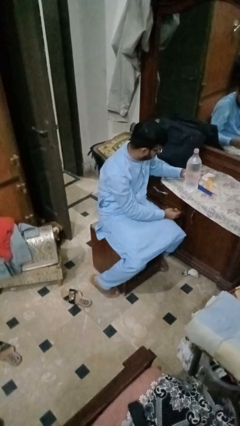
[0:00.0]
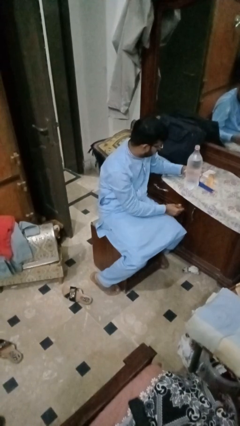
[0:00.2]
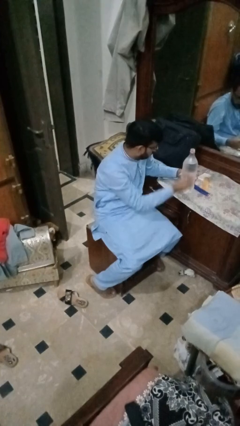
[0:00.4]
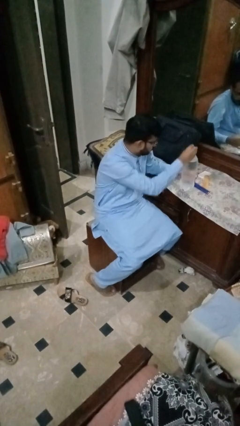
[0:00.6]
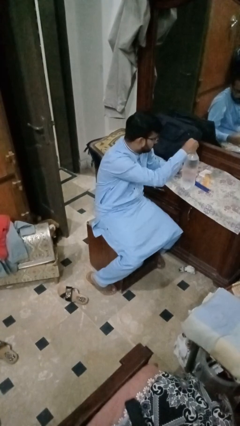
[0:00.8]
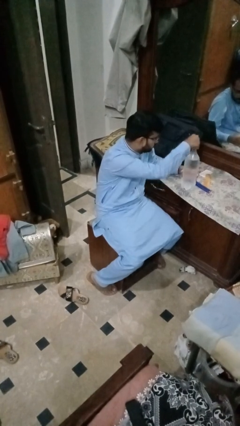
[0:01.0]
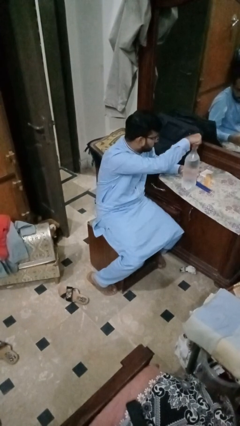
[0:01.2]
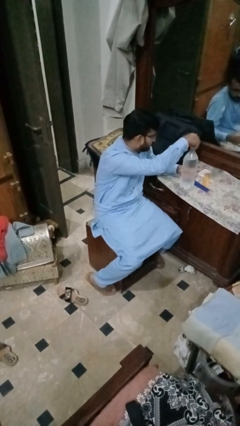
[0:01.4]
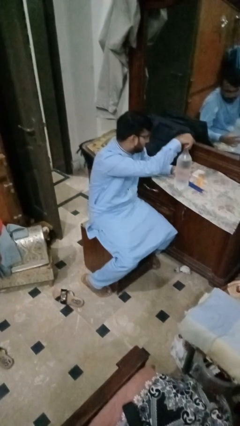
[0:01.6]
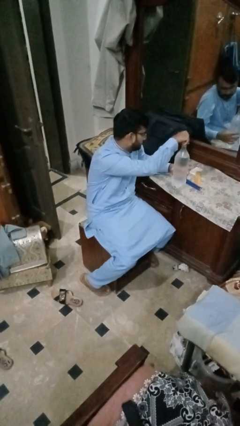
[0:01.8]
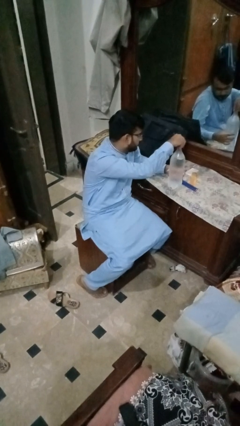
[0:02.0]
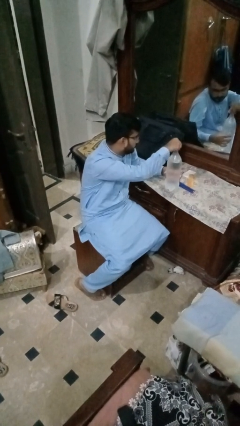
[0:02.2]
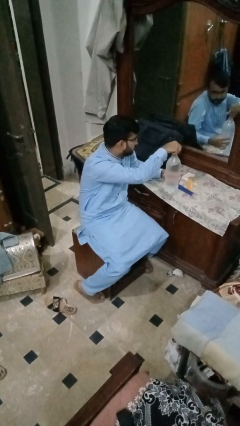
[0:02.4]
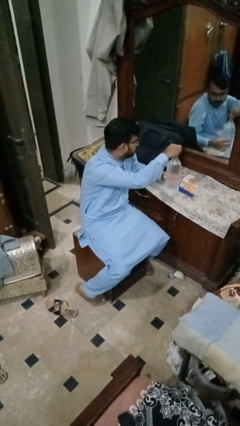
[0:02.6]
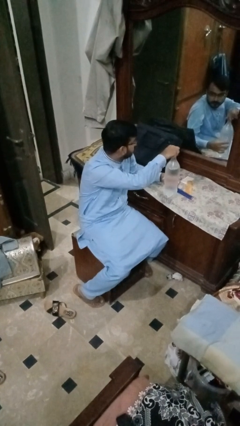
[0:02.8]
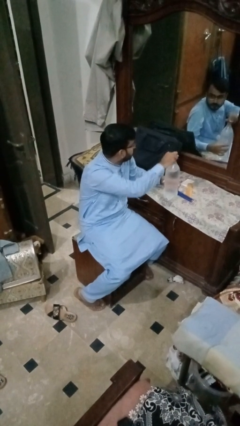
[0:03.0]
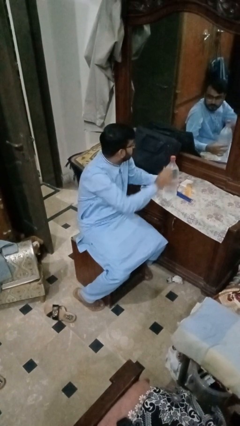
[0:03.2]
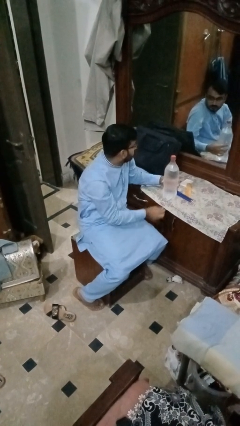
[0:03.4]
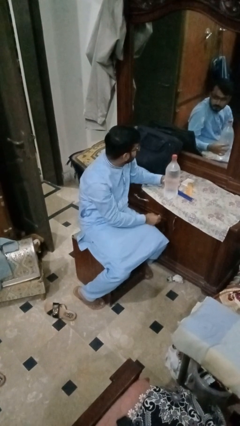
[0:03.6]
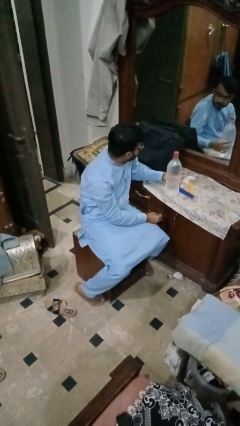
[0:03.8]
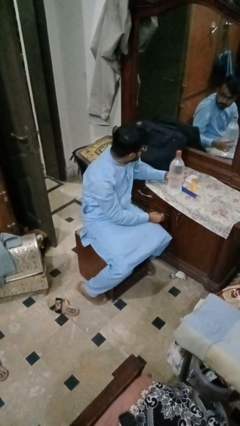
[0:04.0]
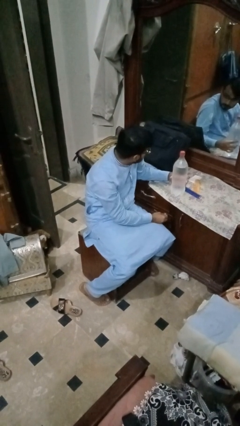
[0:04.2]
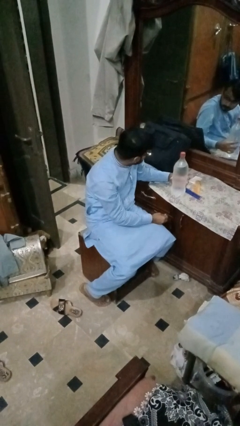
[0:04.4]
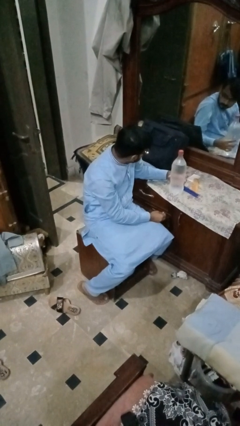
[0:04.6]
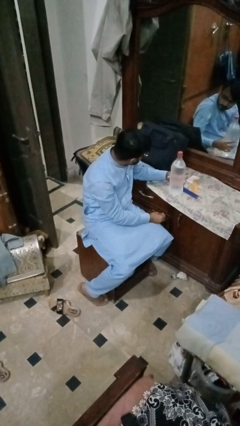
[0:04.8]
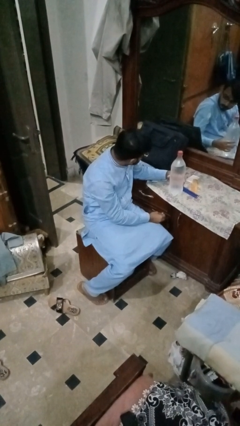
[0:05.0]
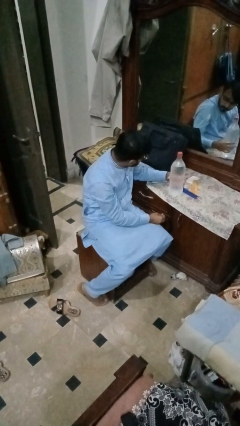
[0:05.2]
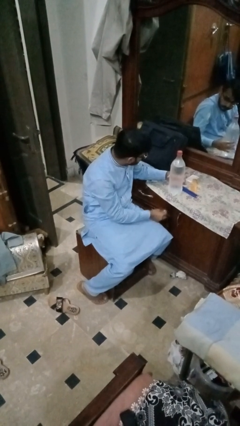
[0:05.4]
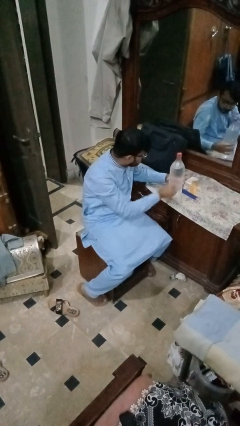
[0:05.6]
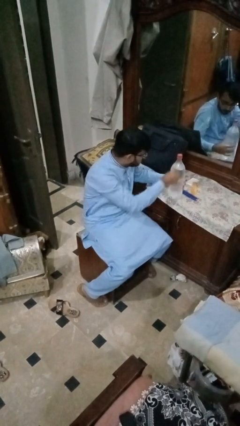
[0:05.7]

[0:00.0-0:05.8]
person screws lid to bottle

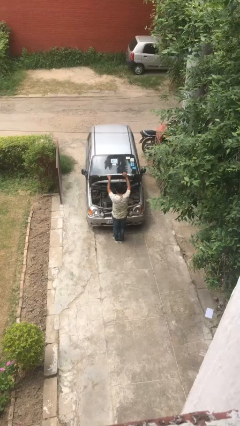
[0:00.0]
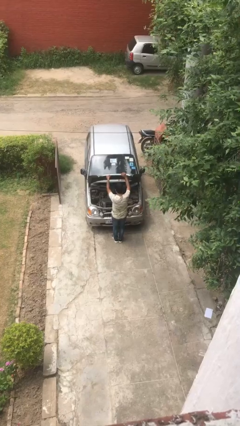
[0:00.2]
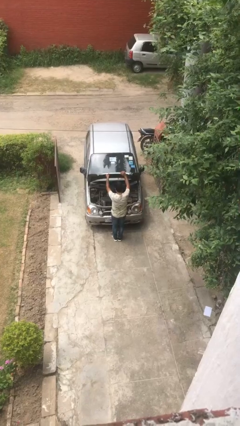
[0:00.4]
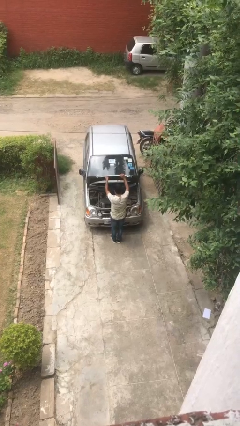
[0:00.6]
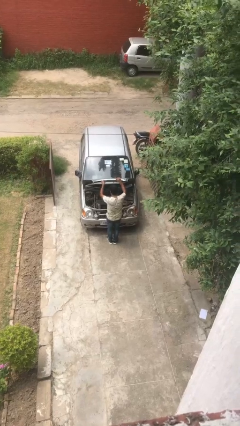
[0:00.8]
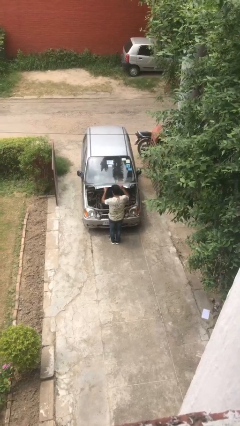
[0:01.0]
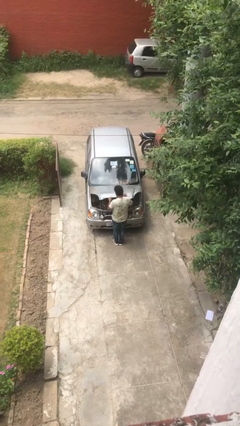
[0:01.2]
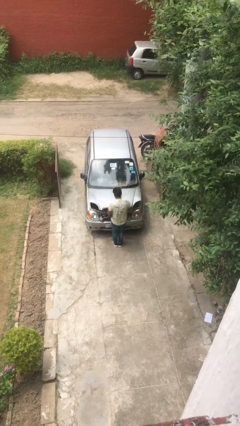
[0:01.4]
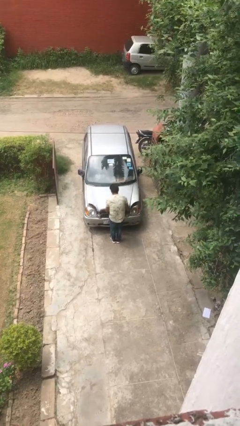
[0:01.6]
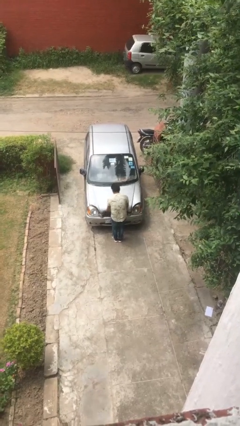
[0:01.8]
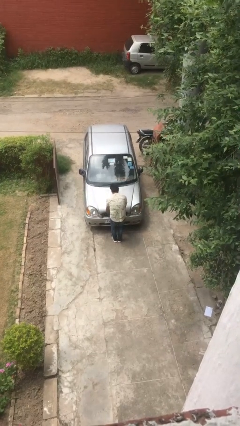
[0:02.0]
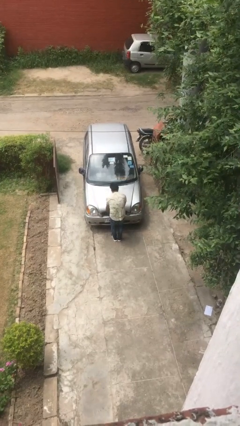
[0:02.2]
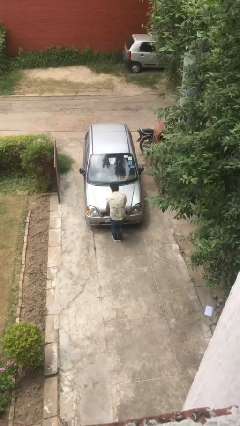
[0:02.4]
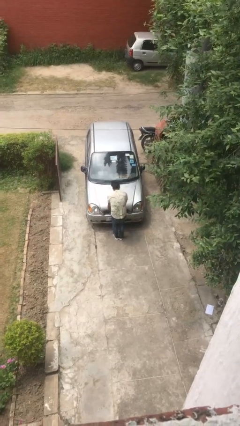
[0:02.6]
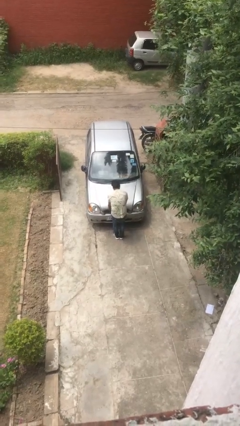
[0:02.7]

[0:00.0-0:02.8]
person closes car hood

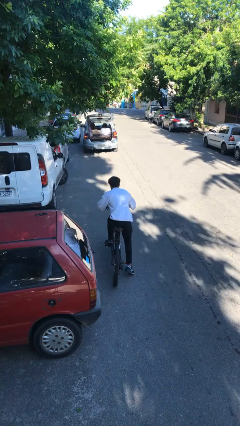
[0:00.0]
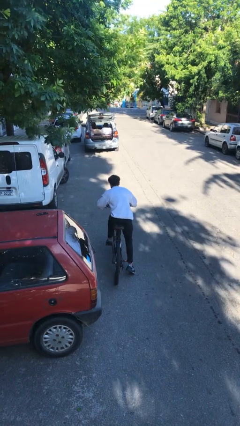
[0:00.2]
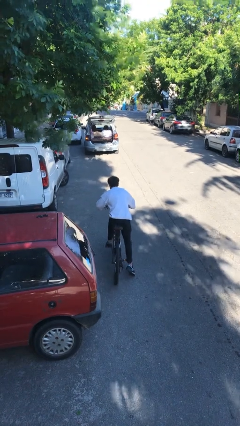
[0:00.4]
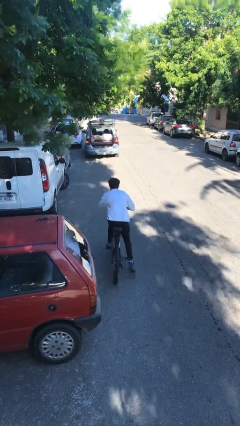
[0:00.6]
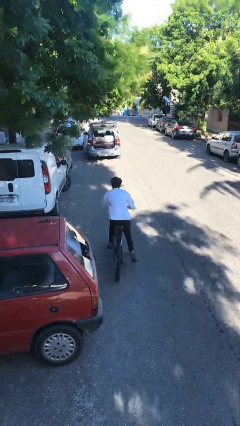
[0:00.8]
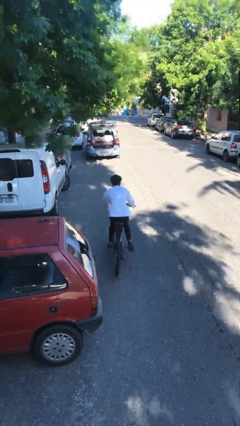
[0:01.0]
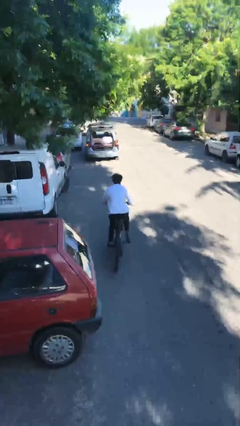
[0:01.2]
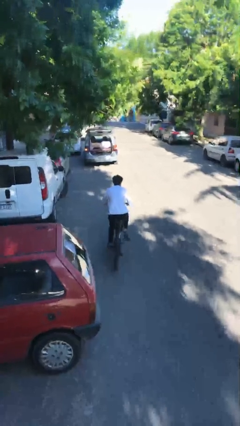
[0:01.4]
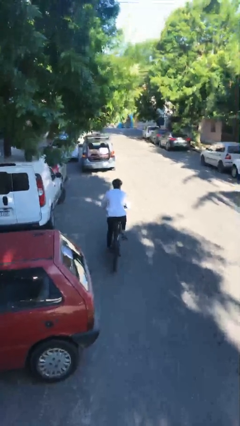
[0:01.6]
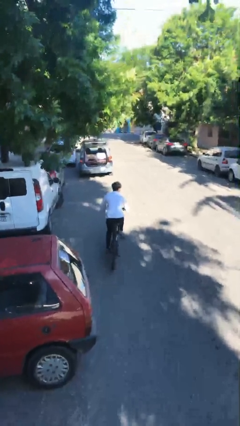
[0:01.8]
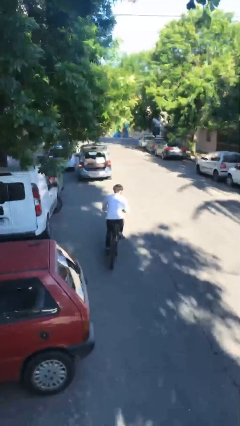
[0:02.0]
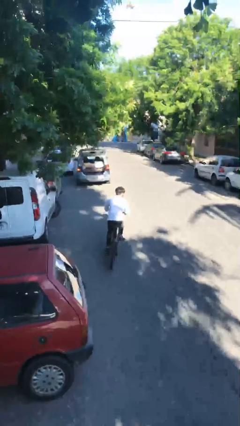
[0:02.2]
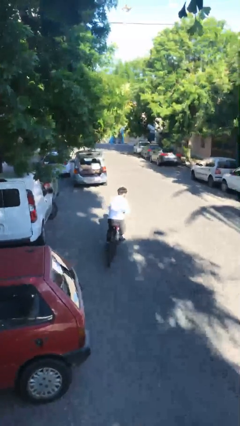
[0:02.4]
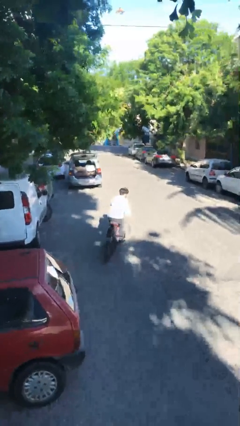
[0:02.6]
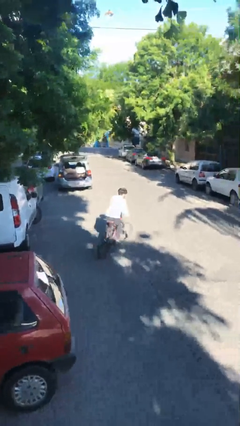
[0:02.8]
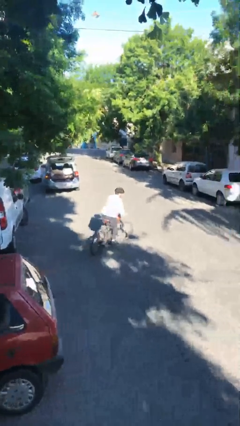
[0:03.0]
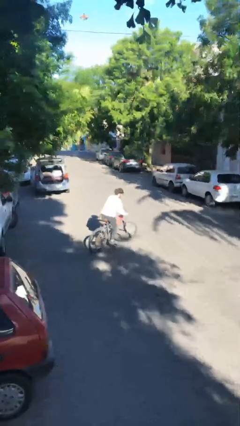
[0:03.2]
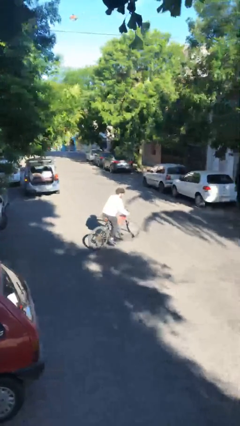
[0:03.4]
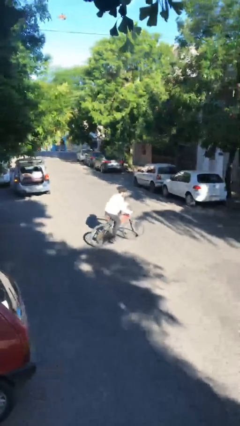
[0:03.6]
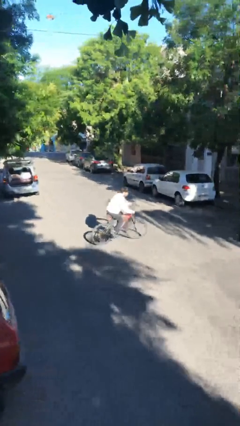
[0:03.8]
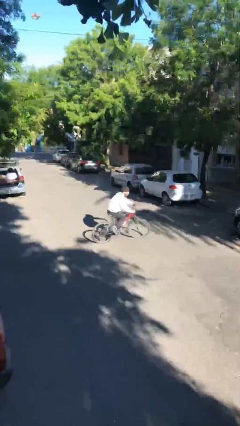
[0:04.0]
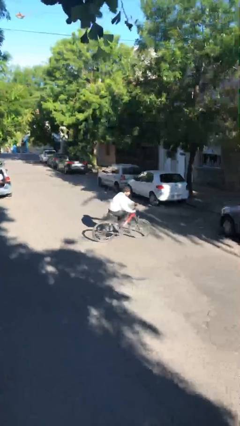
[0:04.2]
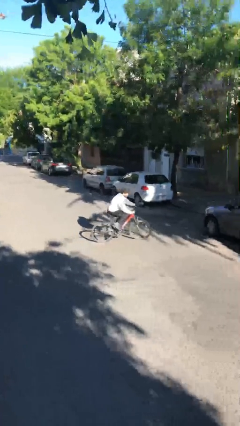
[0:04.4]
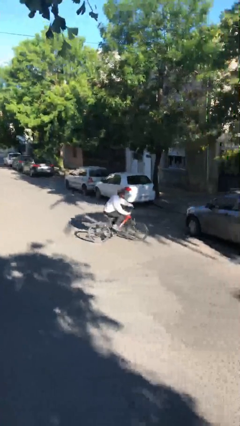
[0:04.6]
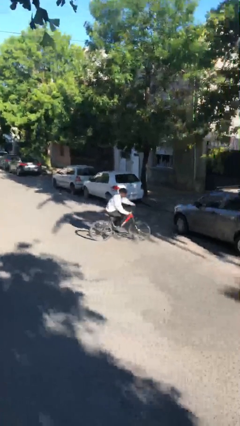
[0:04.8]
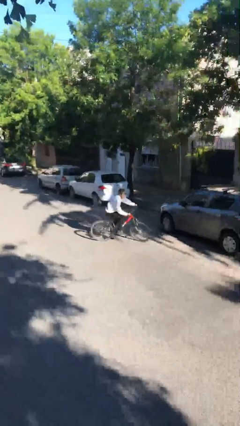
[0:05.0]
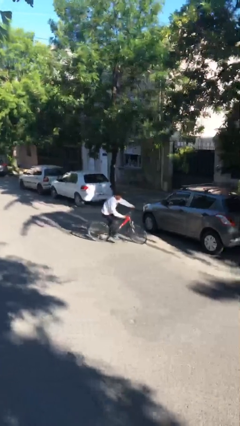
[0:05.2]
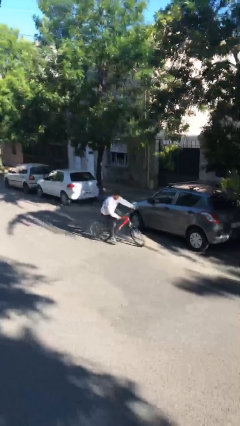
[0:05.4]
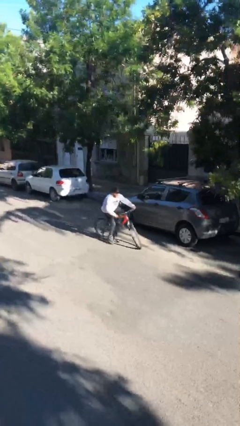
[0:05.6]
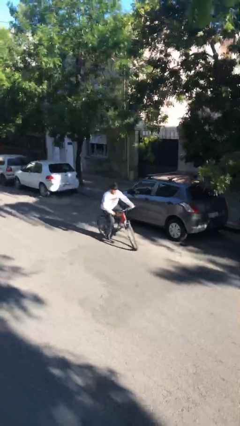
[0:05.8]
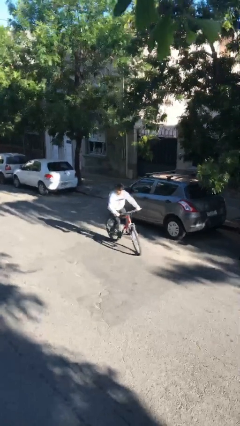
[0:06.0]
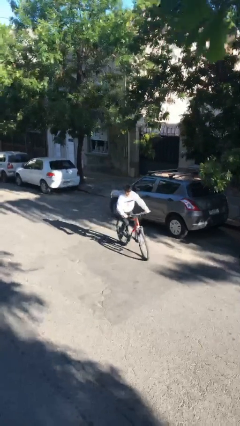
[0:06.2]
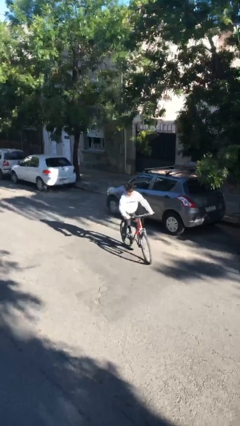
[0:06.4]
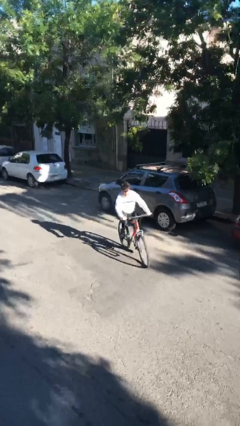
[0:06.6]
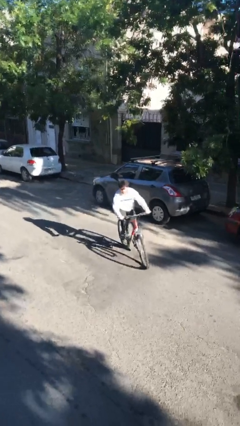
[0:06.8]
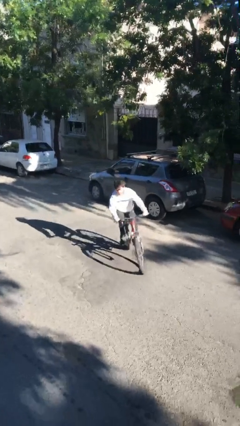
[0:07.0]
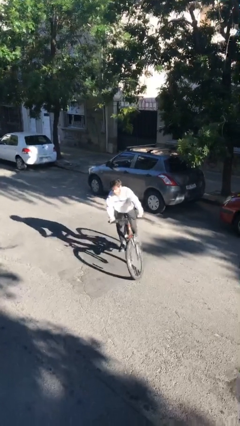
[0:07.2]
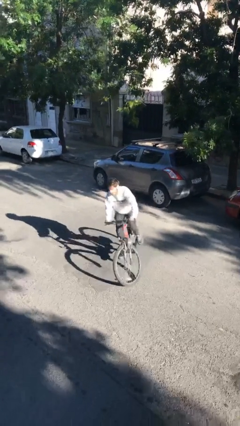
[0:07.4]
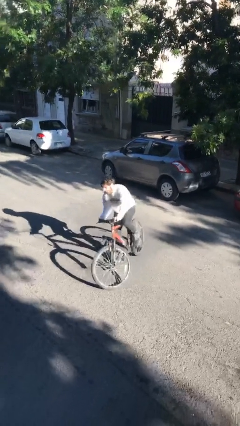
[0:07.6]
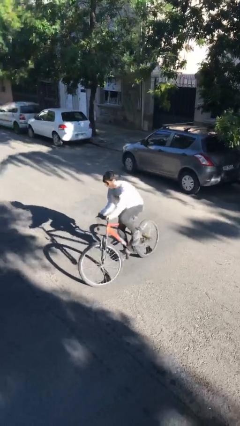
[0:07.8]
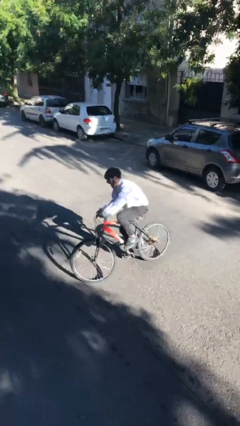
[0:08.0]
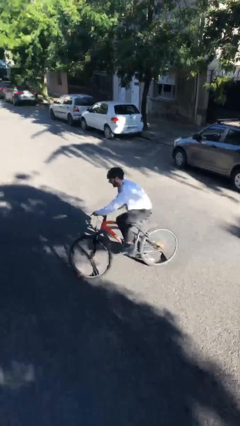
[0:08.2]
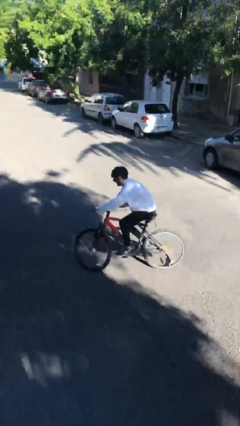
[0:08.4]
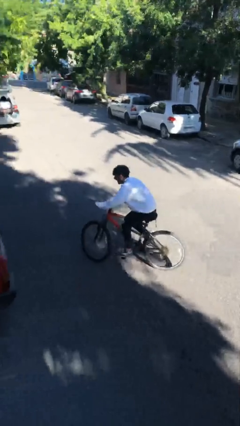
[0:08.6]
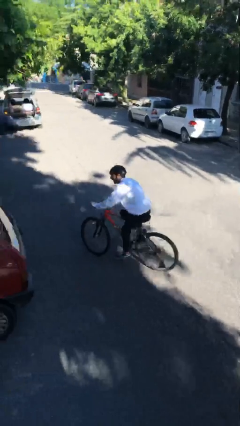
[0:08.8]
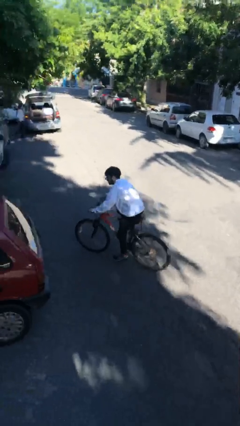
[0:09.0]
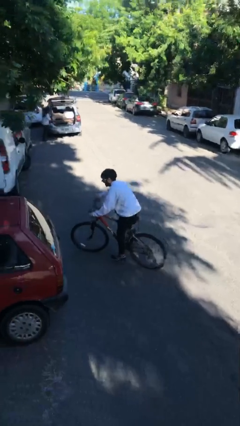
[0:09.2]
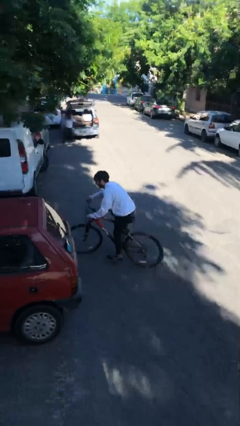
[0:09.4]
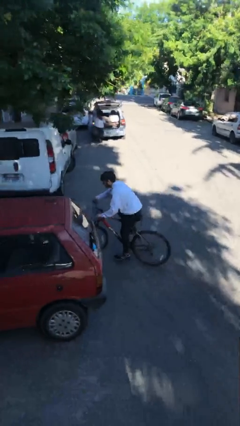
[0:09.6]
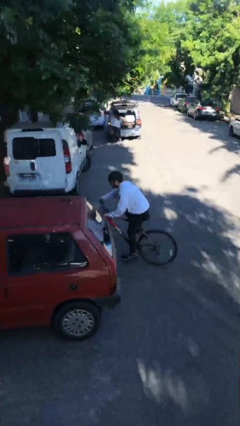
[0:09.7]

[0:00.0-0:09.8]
person rides bicycle
